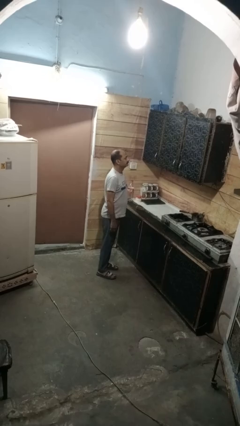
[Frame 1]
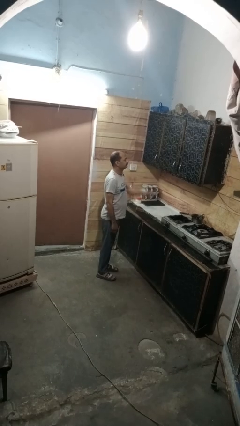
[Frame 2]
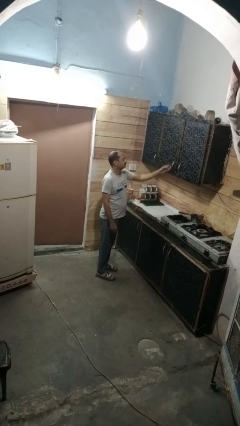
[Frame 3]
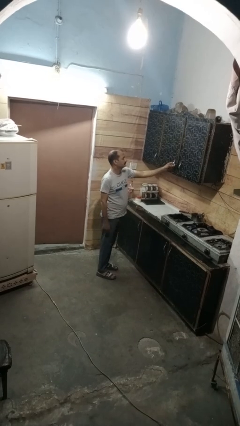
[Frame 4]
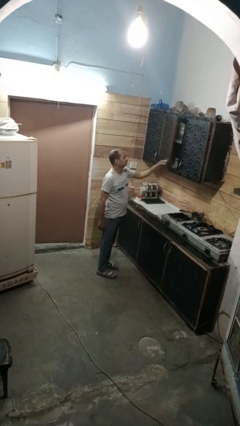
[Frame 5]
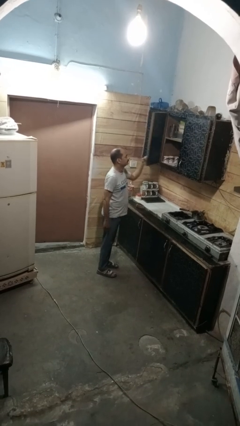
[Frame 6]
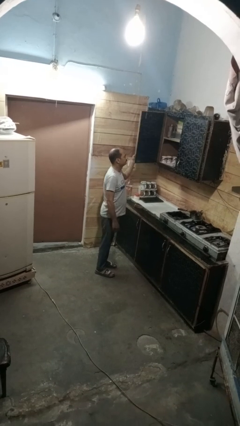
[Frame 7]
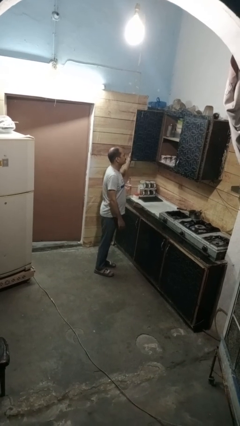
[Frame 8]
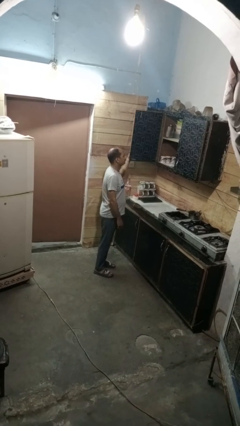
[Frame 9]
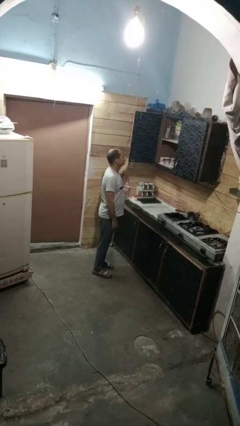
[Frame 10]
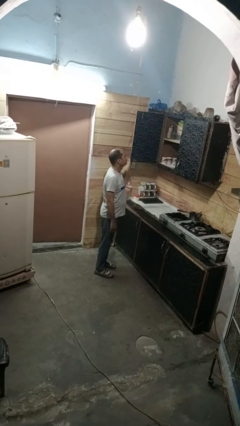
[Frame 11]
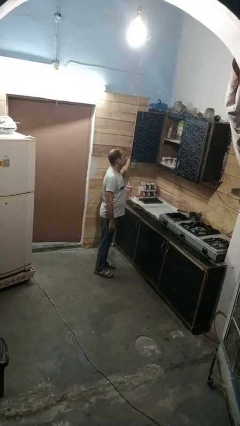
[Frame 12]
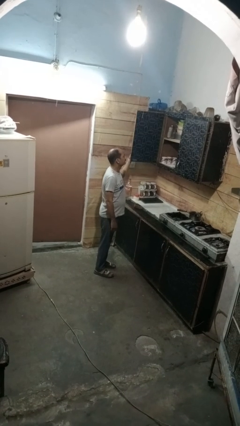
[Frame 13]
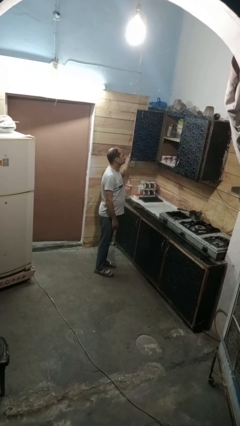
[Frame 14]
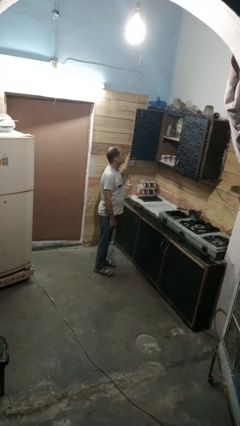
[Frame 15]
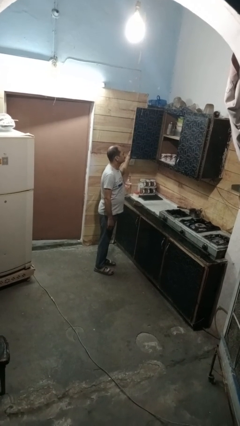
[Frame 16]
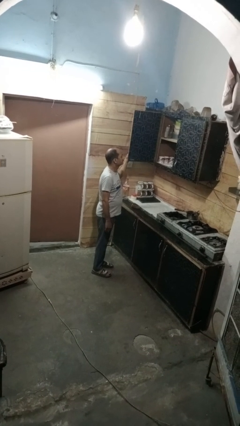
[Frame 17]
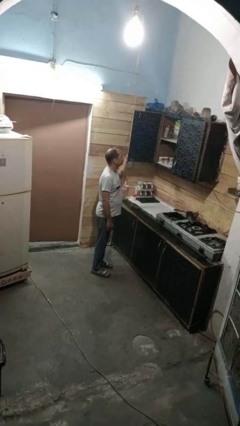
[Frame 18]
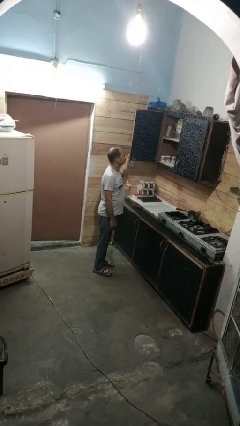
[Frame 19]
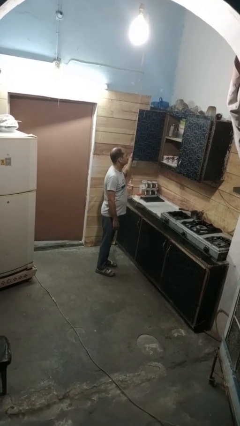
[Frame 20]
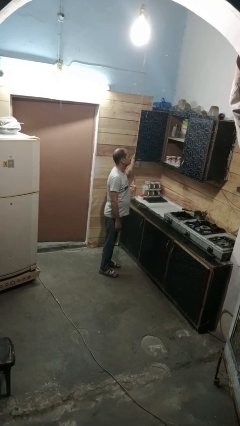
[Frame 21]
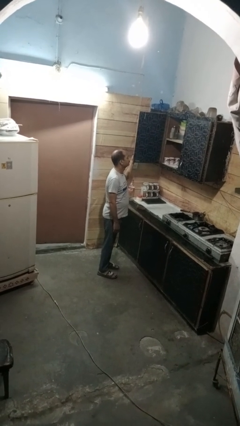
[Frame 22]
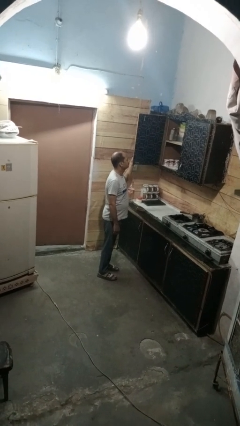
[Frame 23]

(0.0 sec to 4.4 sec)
person opens cabinet

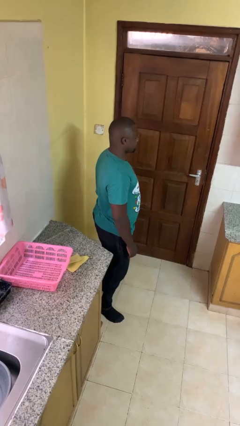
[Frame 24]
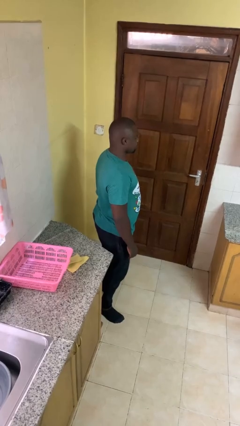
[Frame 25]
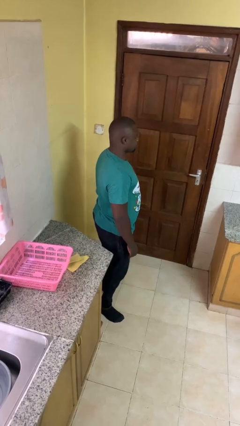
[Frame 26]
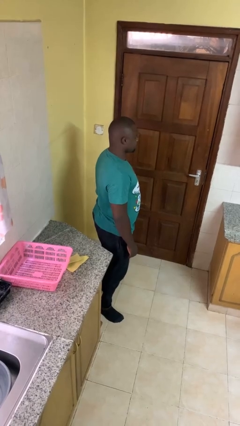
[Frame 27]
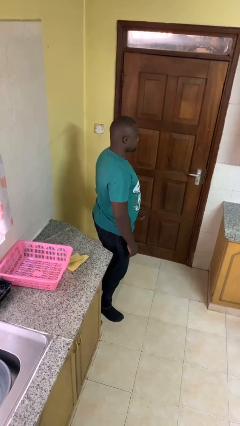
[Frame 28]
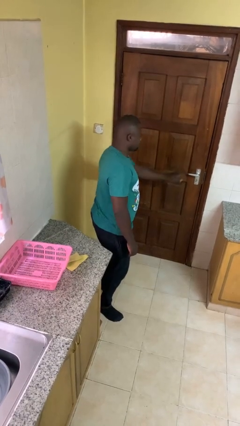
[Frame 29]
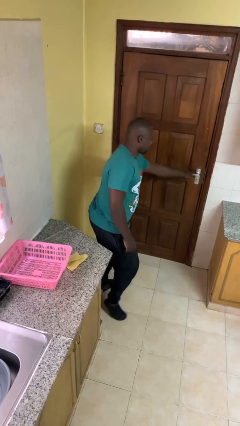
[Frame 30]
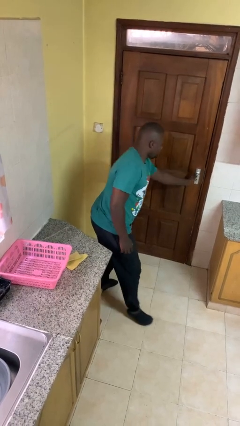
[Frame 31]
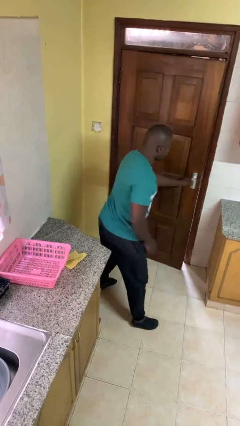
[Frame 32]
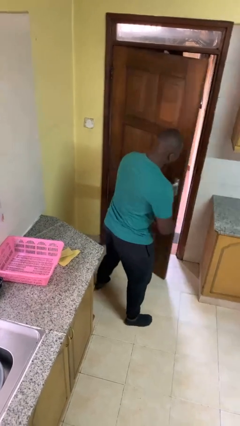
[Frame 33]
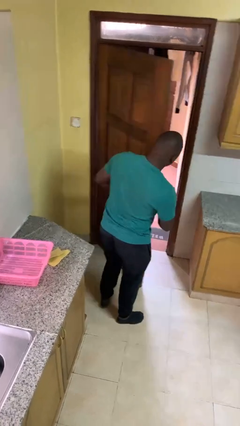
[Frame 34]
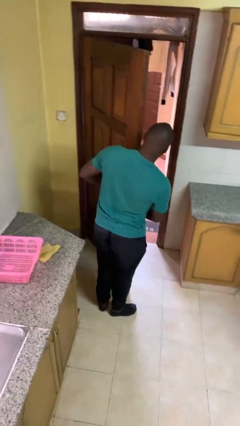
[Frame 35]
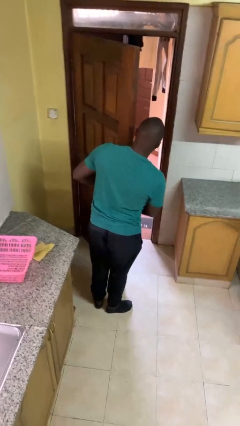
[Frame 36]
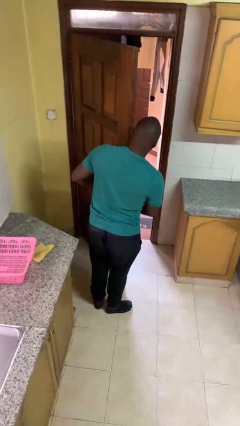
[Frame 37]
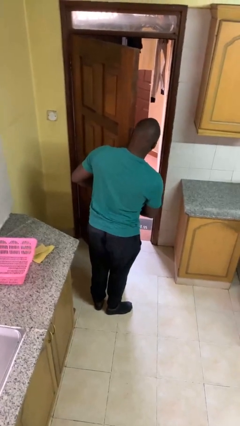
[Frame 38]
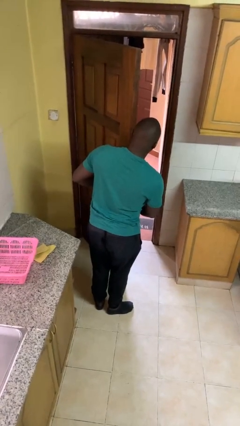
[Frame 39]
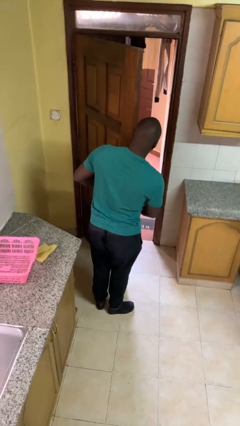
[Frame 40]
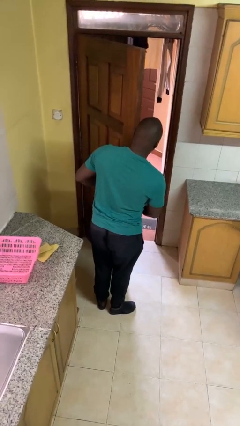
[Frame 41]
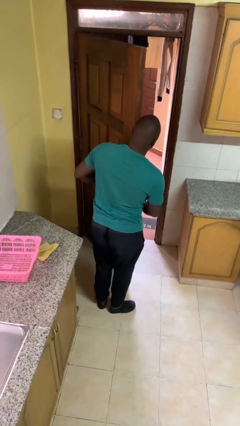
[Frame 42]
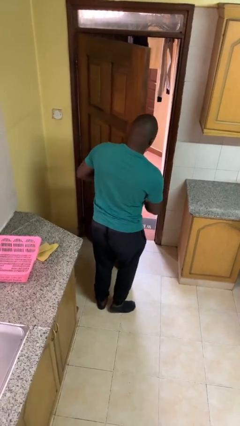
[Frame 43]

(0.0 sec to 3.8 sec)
person opens facility door

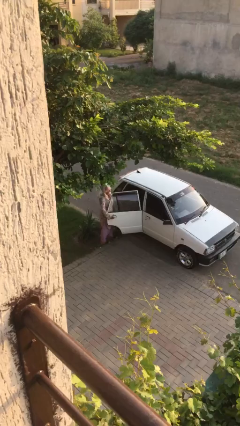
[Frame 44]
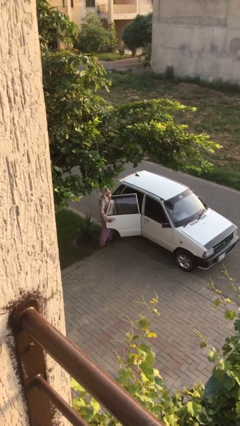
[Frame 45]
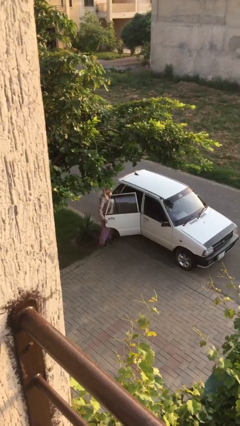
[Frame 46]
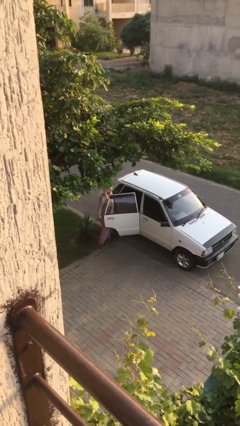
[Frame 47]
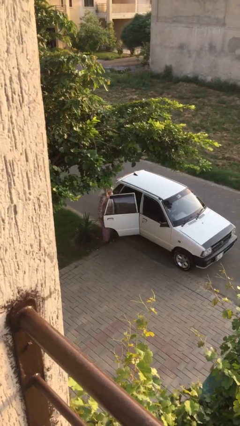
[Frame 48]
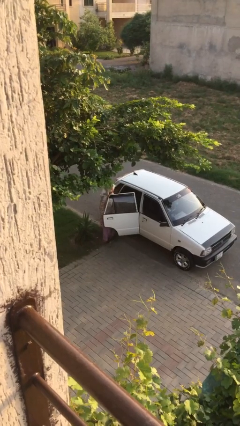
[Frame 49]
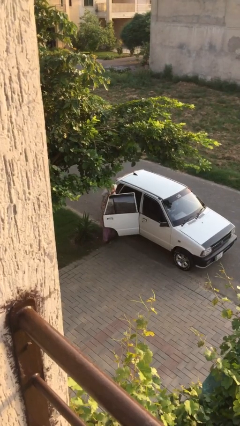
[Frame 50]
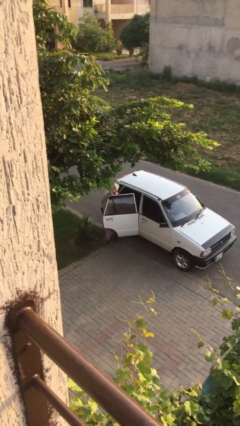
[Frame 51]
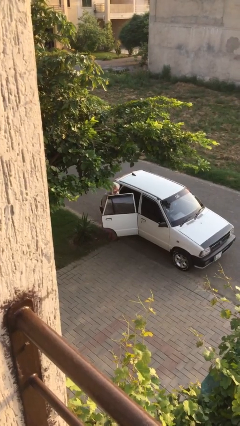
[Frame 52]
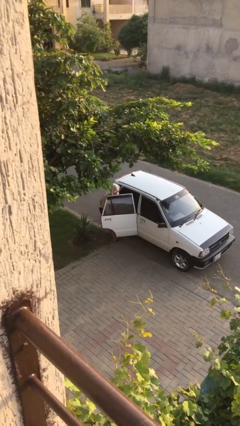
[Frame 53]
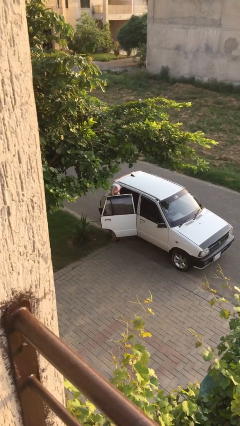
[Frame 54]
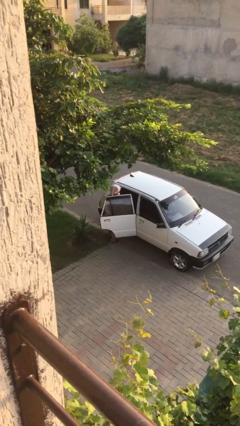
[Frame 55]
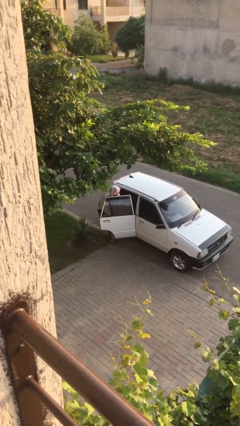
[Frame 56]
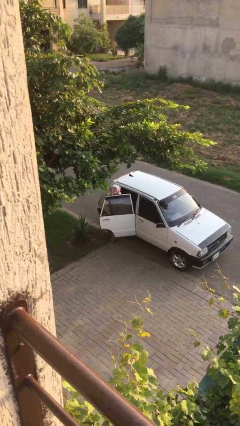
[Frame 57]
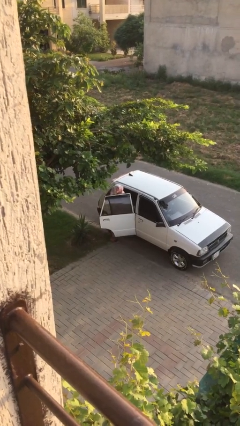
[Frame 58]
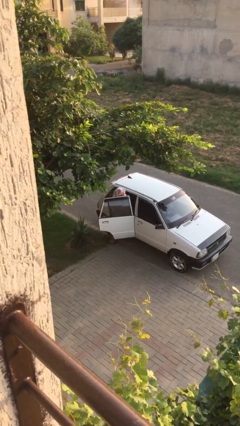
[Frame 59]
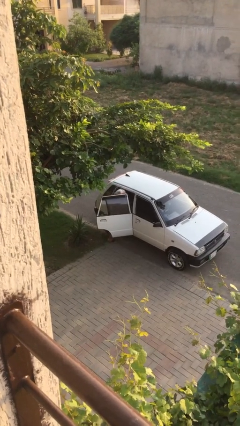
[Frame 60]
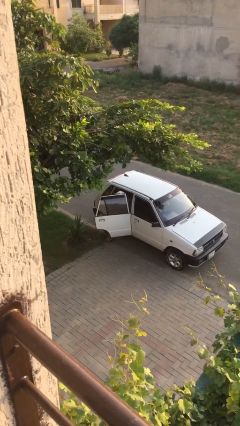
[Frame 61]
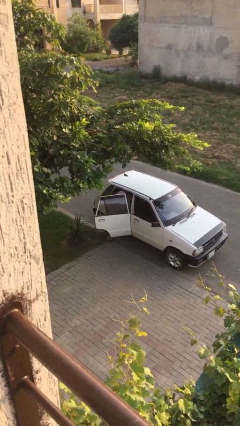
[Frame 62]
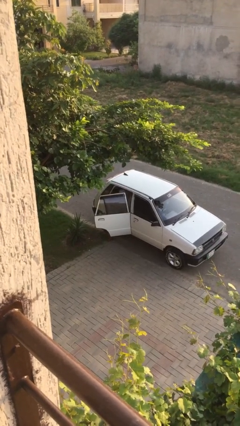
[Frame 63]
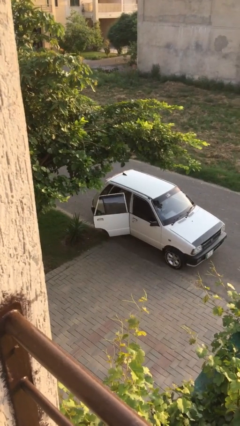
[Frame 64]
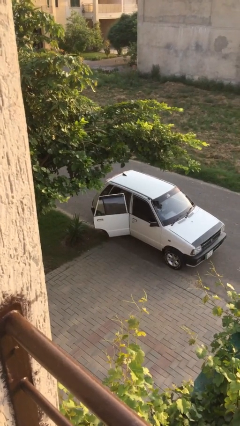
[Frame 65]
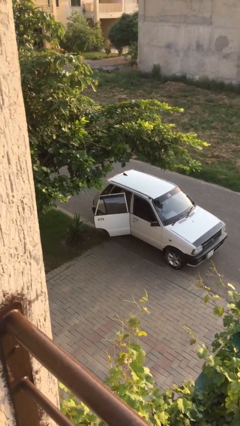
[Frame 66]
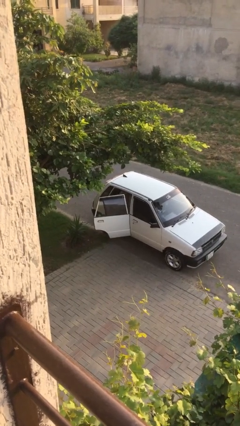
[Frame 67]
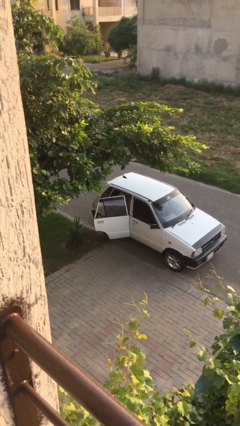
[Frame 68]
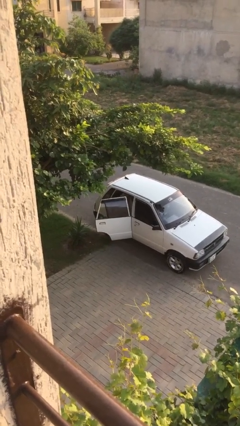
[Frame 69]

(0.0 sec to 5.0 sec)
person enters car

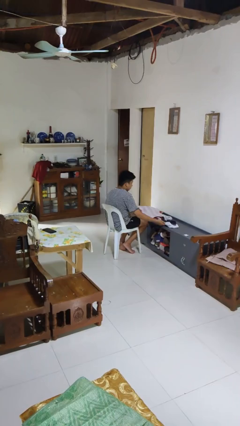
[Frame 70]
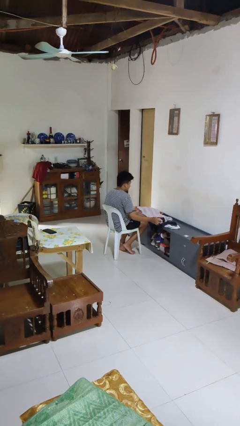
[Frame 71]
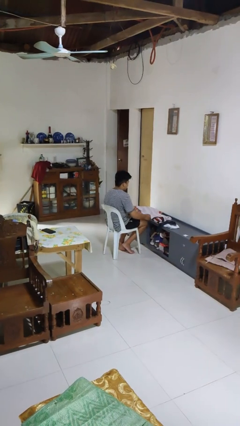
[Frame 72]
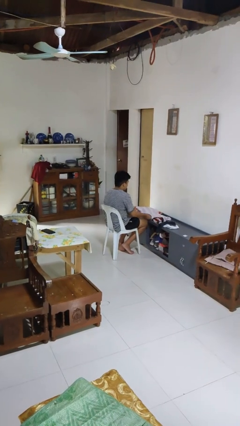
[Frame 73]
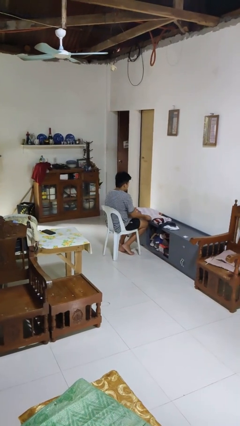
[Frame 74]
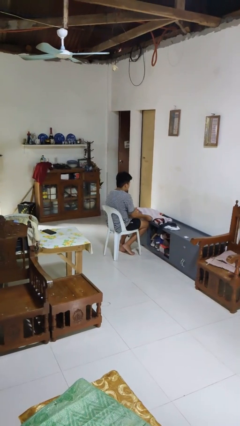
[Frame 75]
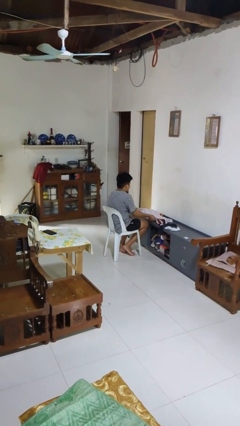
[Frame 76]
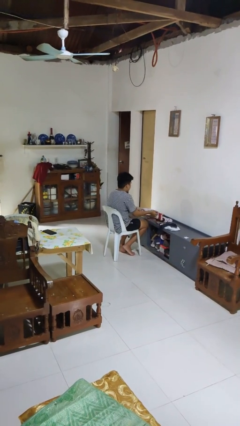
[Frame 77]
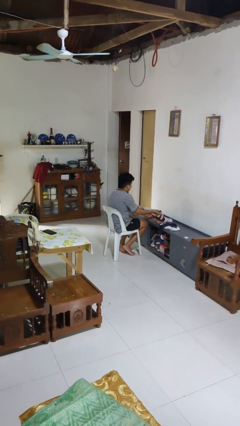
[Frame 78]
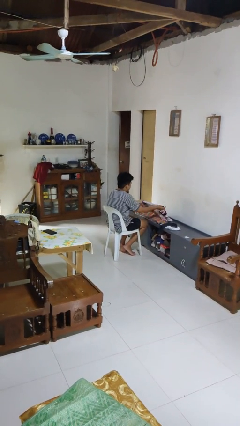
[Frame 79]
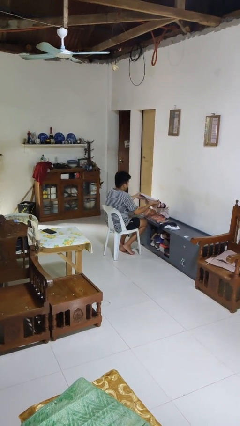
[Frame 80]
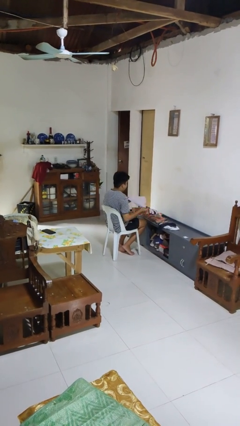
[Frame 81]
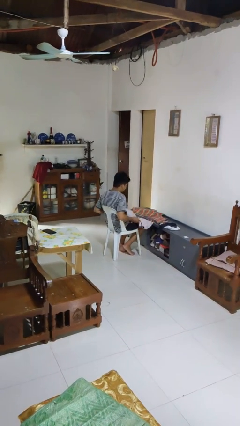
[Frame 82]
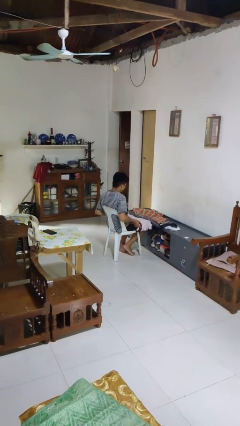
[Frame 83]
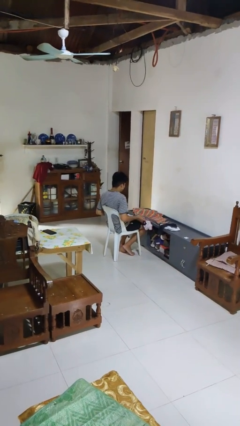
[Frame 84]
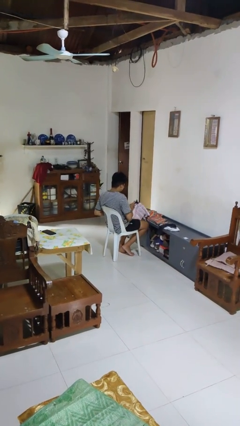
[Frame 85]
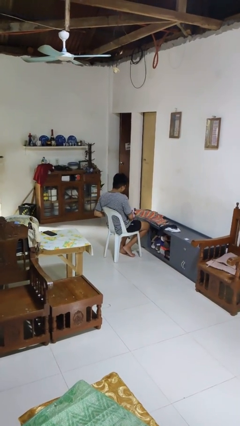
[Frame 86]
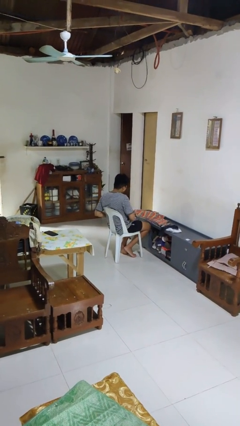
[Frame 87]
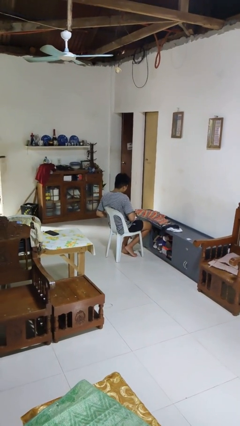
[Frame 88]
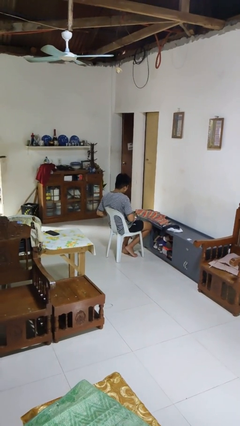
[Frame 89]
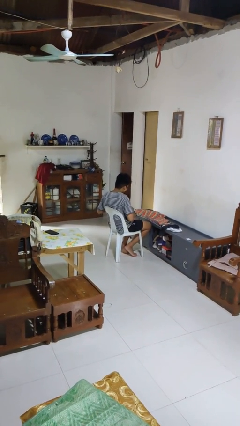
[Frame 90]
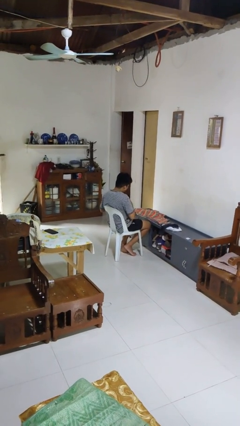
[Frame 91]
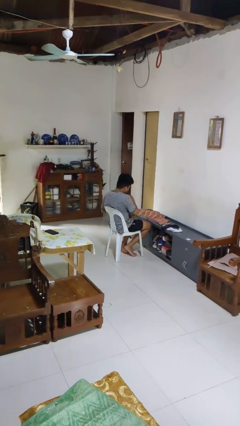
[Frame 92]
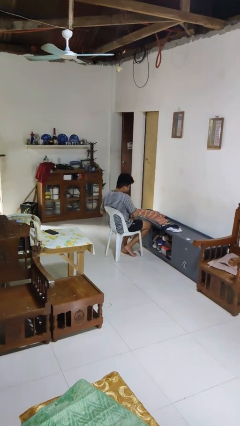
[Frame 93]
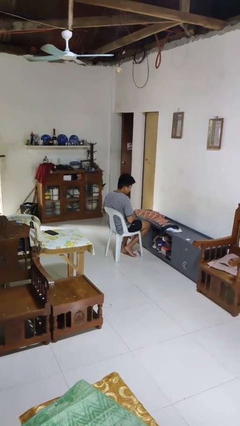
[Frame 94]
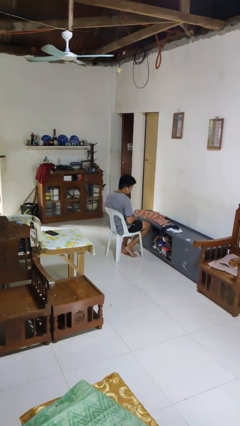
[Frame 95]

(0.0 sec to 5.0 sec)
person folds shirt
